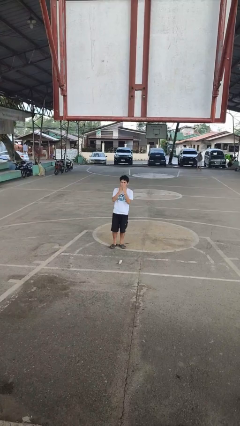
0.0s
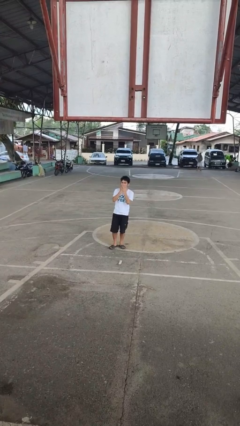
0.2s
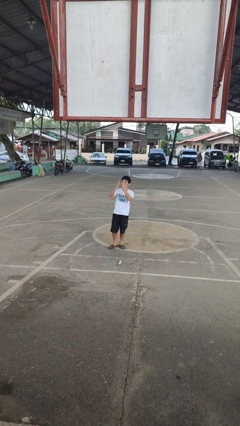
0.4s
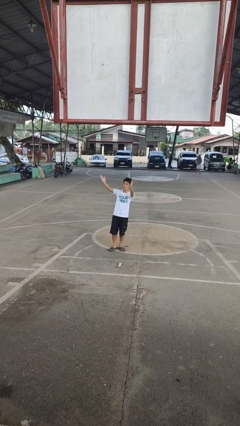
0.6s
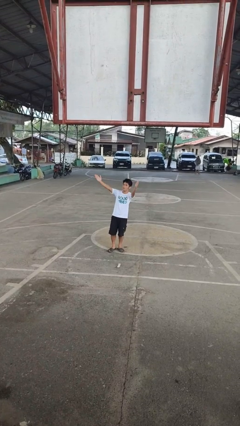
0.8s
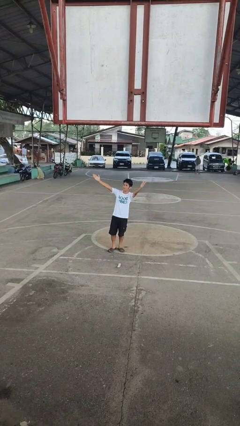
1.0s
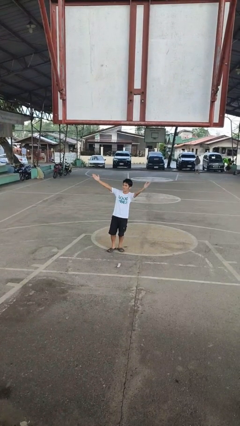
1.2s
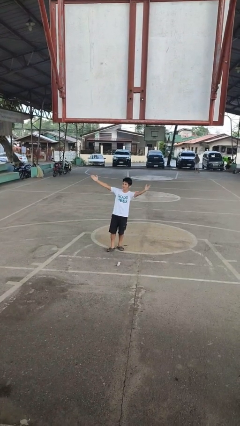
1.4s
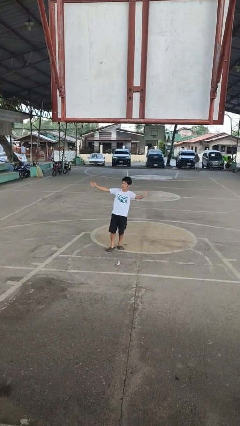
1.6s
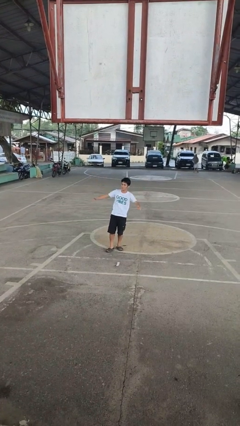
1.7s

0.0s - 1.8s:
person gestures blow kiss

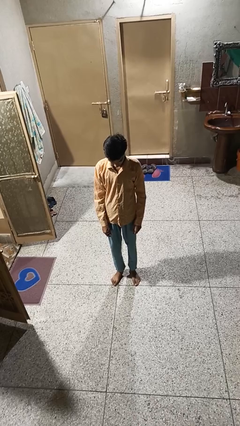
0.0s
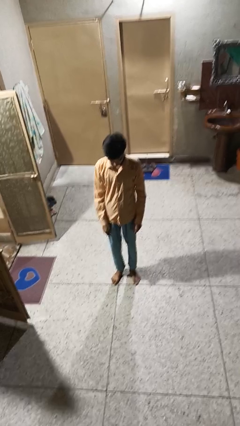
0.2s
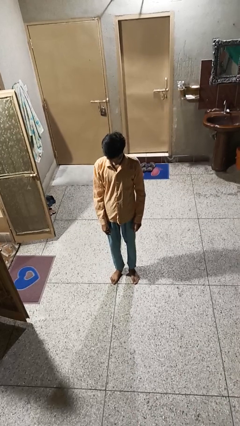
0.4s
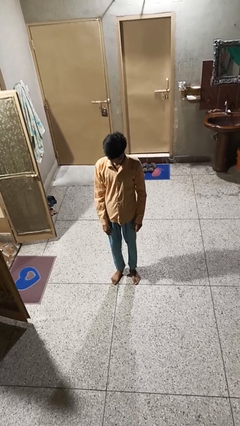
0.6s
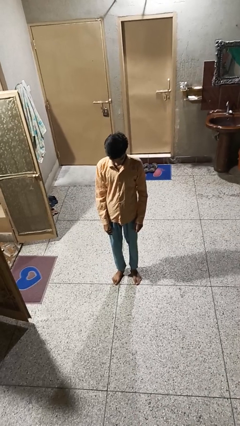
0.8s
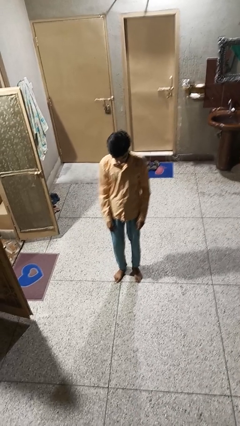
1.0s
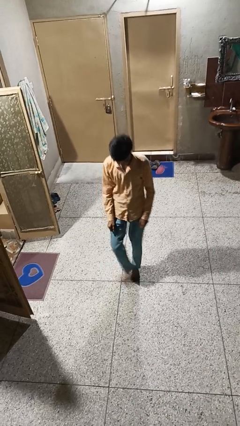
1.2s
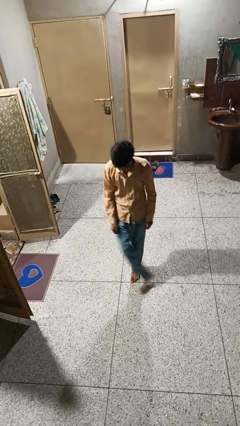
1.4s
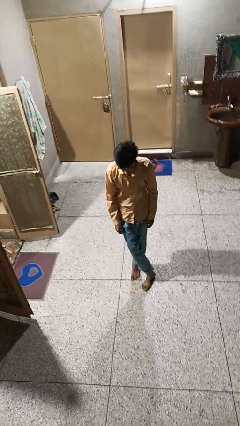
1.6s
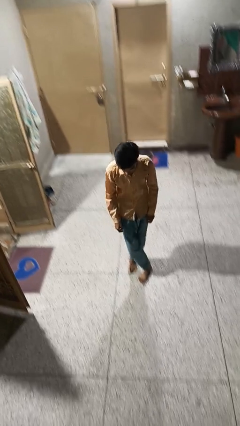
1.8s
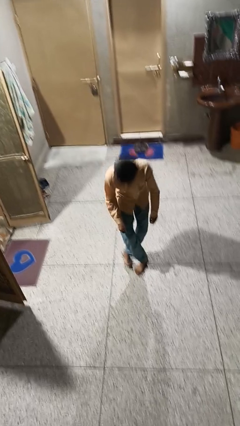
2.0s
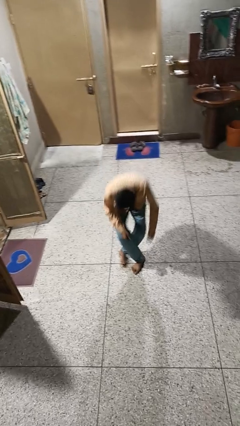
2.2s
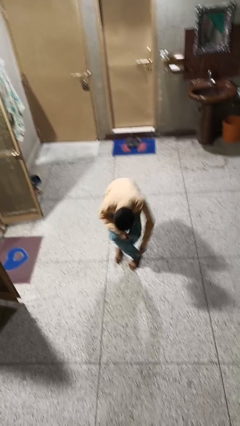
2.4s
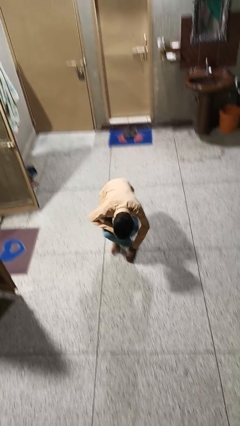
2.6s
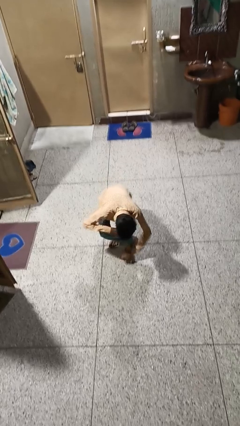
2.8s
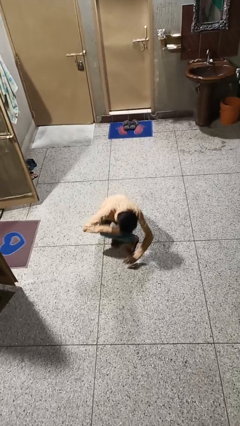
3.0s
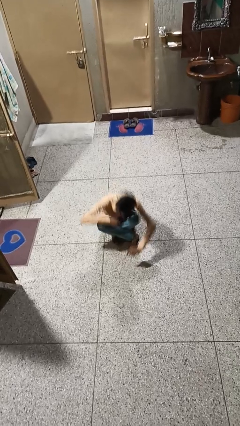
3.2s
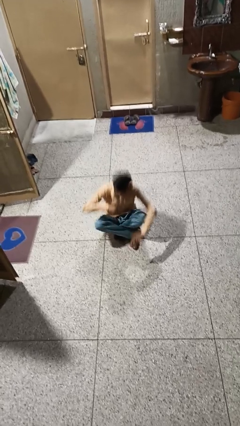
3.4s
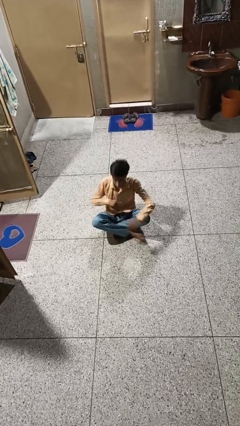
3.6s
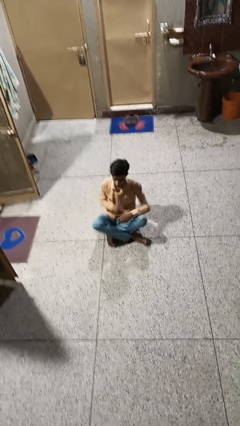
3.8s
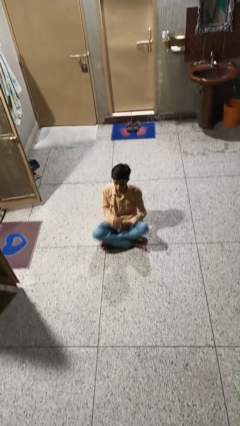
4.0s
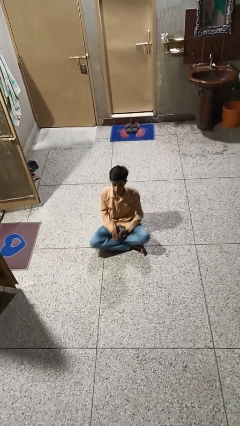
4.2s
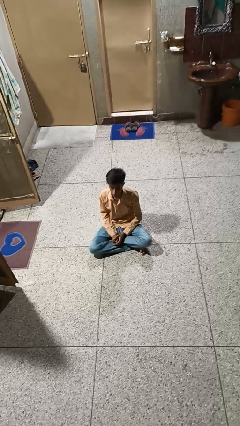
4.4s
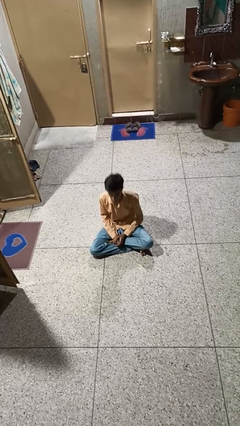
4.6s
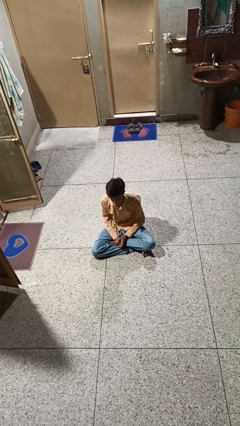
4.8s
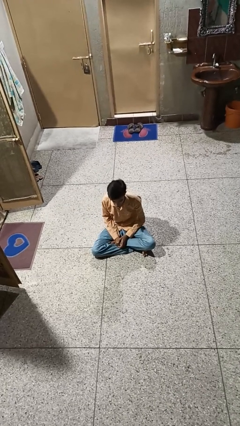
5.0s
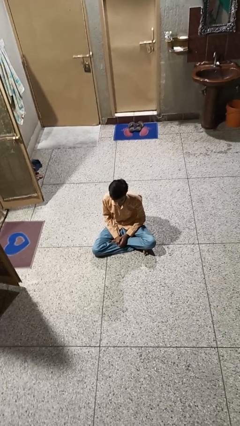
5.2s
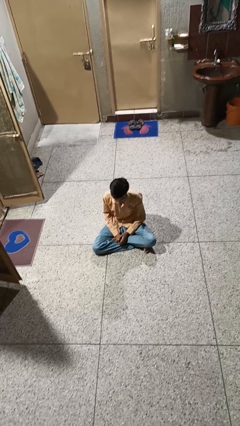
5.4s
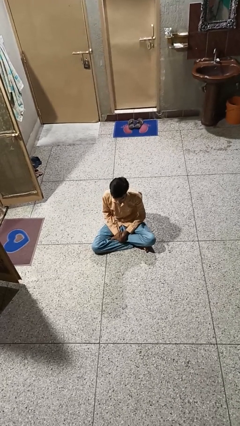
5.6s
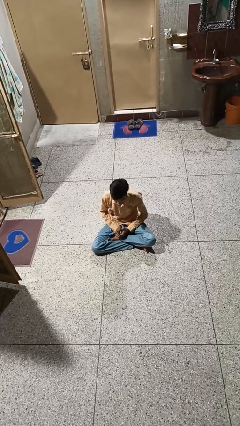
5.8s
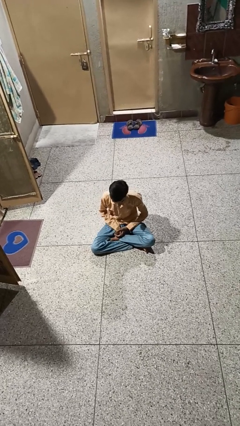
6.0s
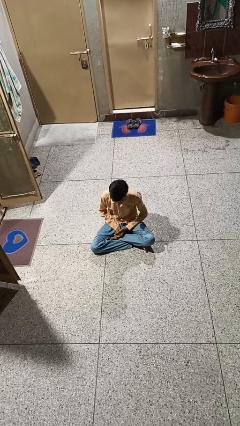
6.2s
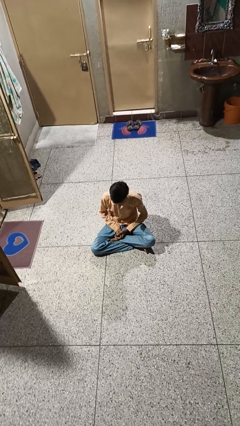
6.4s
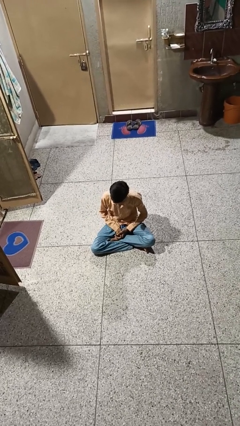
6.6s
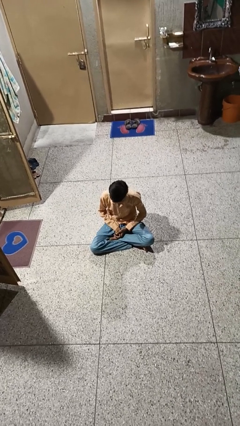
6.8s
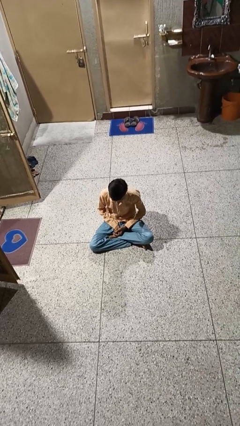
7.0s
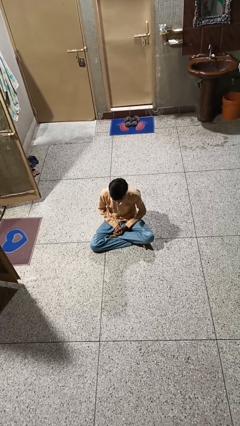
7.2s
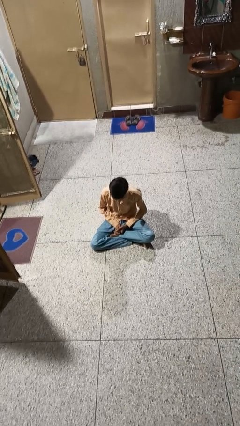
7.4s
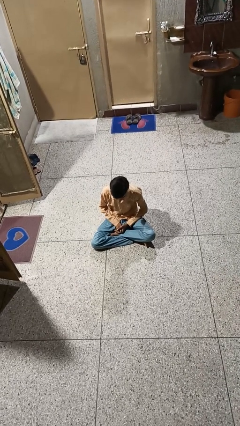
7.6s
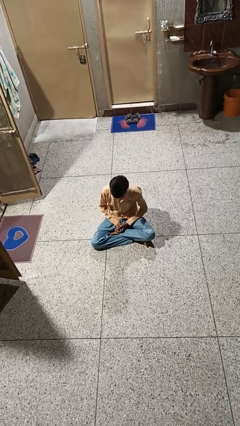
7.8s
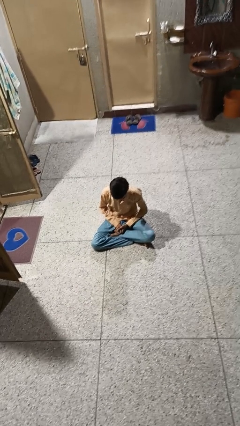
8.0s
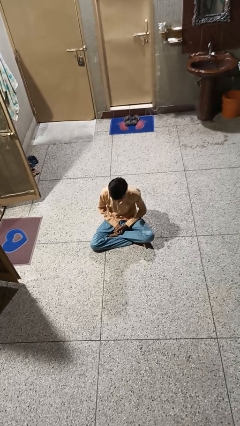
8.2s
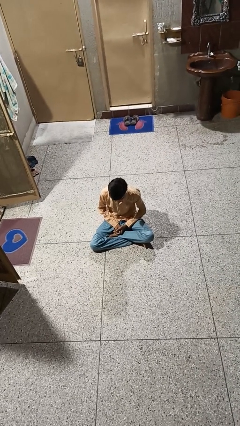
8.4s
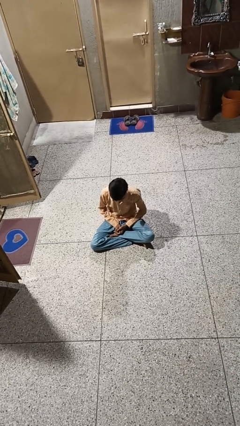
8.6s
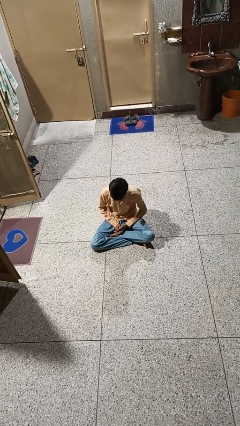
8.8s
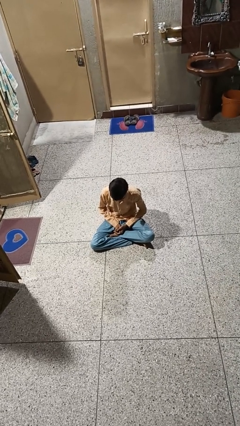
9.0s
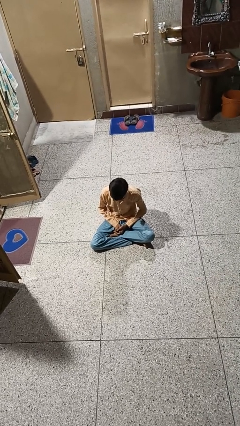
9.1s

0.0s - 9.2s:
person sits crisscross

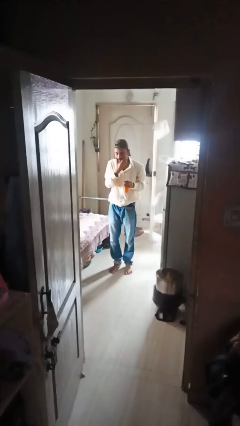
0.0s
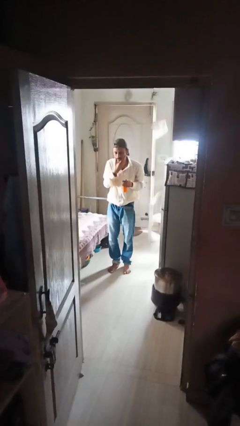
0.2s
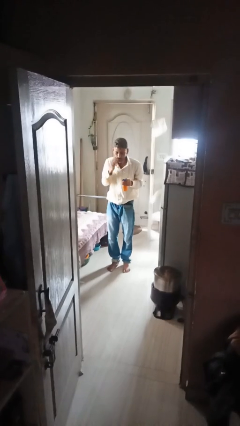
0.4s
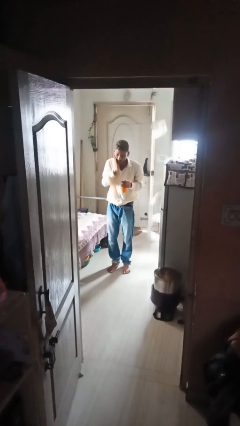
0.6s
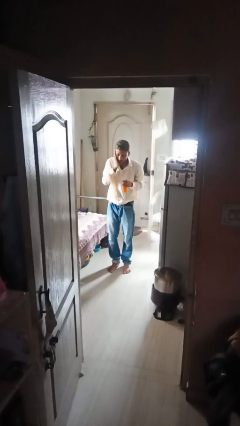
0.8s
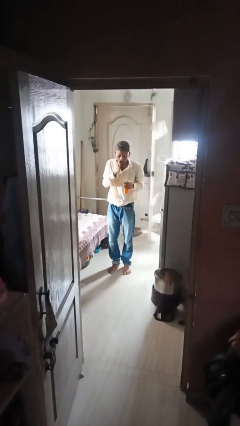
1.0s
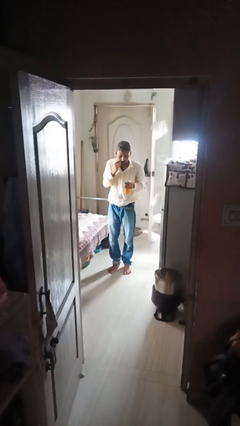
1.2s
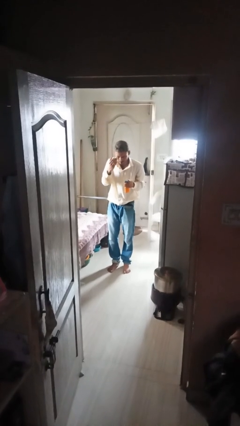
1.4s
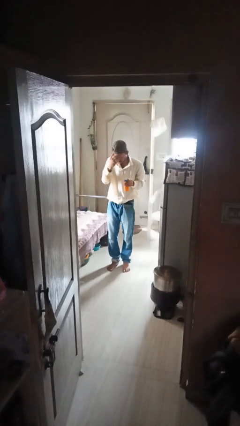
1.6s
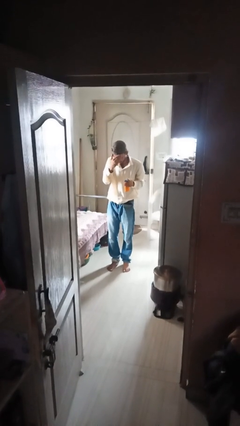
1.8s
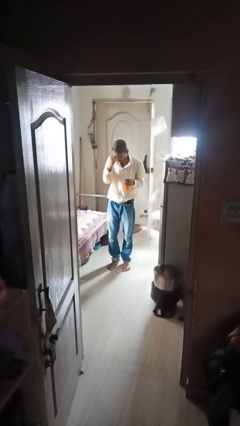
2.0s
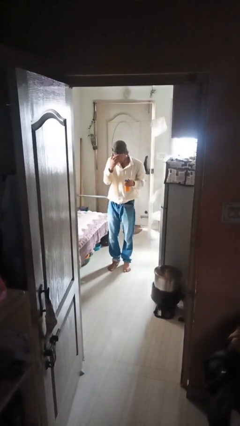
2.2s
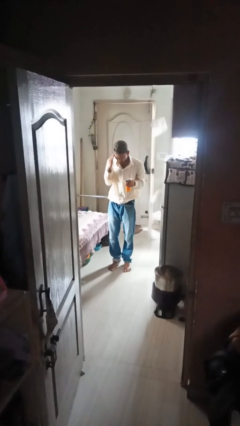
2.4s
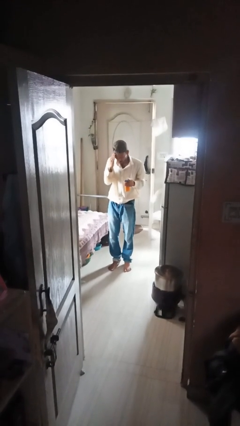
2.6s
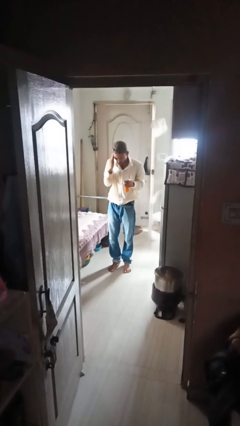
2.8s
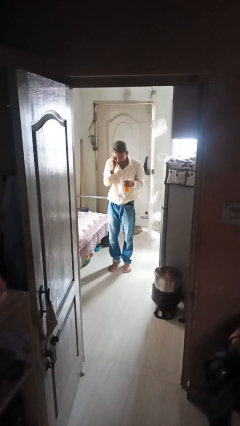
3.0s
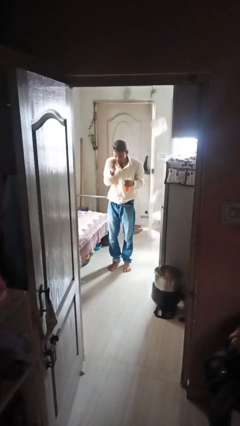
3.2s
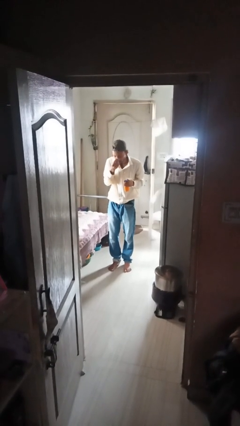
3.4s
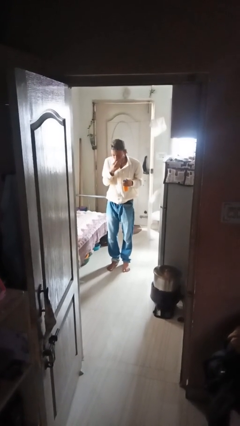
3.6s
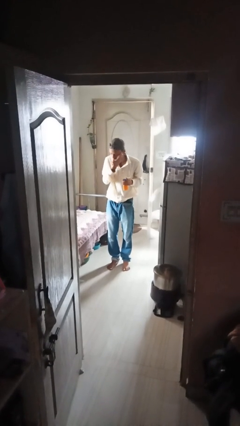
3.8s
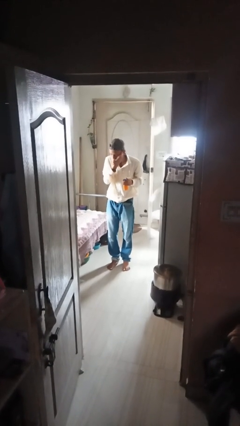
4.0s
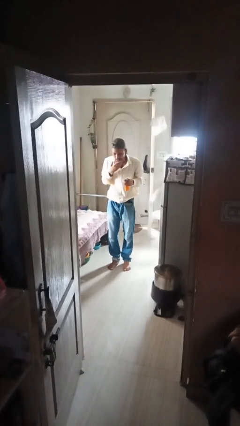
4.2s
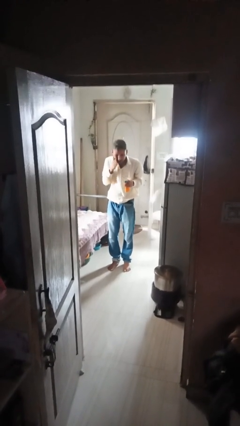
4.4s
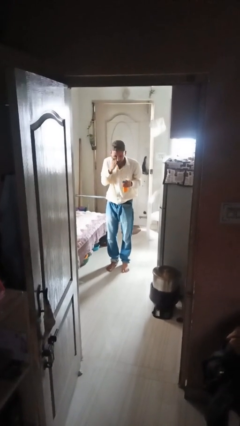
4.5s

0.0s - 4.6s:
person applies sunscreen

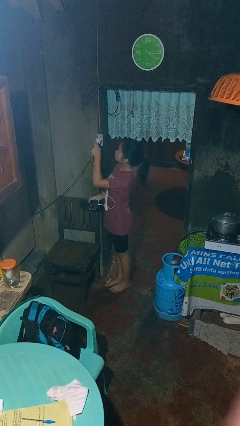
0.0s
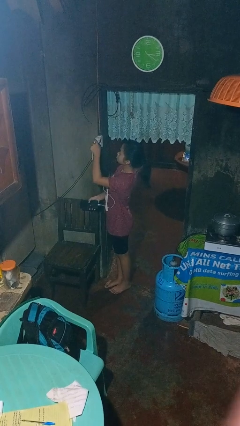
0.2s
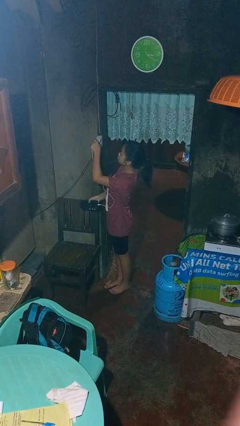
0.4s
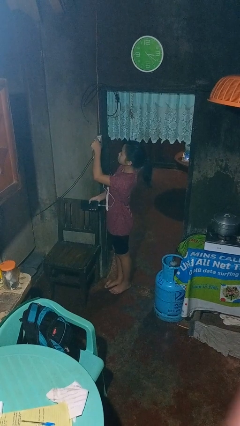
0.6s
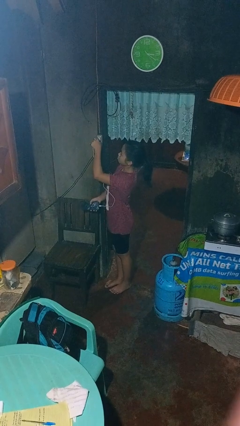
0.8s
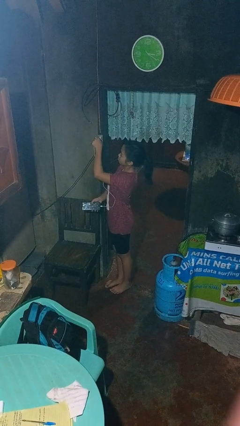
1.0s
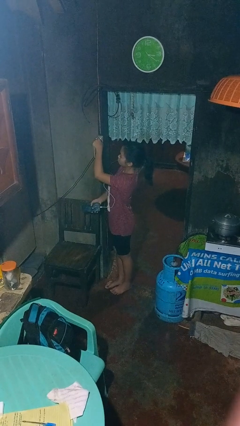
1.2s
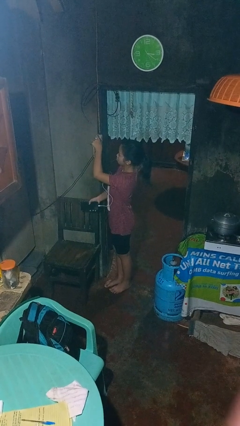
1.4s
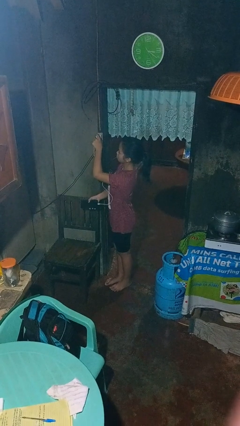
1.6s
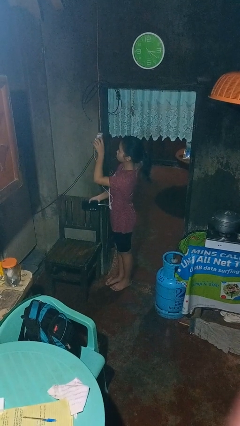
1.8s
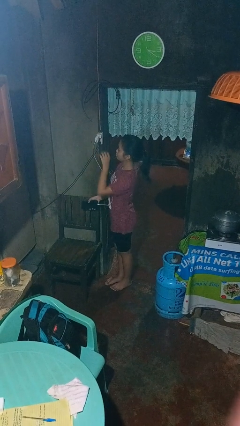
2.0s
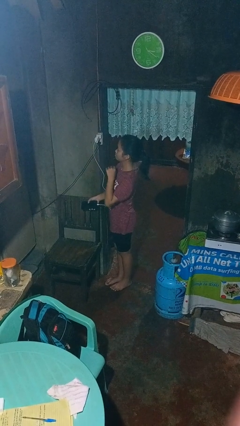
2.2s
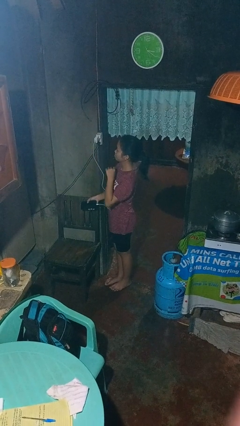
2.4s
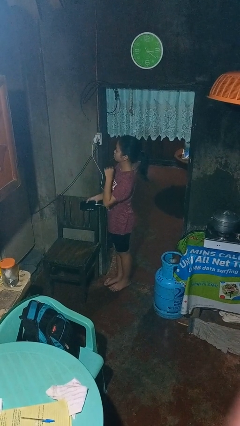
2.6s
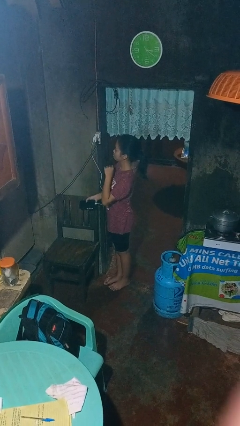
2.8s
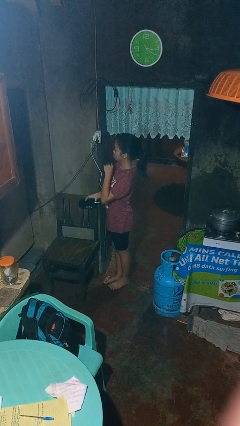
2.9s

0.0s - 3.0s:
person plugs into electrical socket
